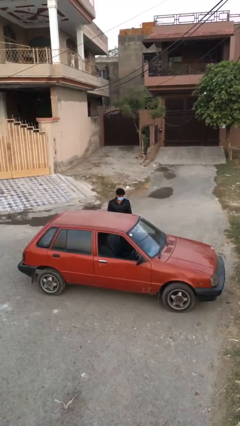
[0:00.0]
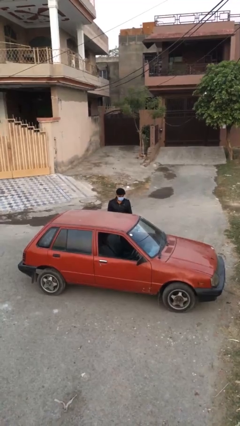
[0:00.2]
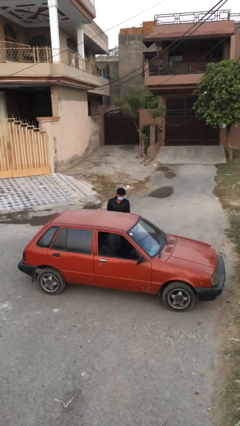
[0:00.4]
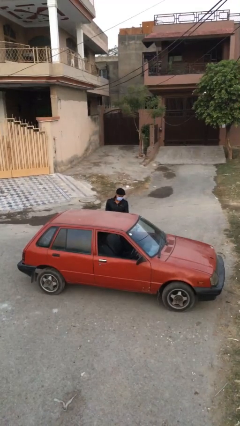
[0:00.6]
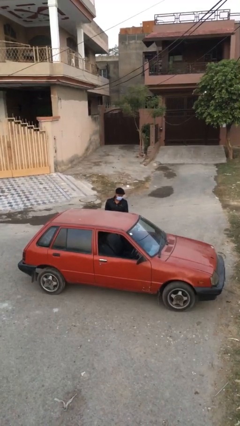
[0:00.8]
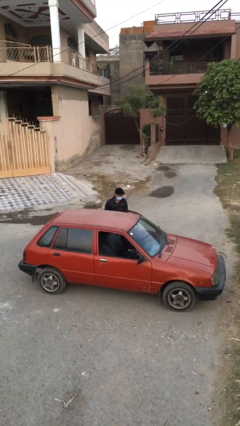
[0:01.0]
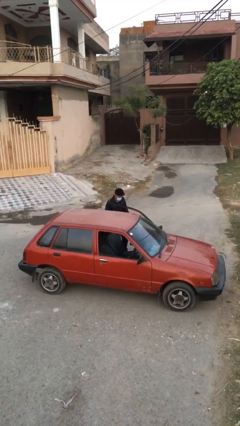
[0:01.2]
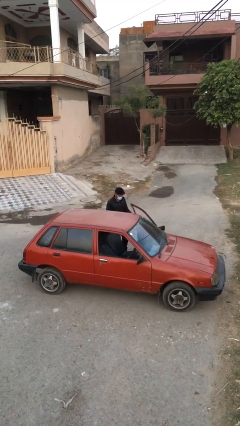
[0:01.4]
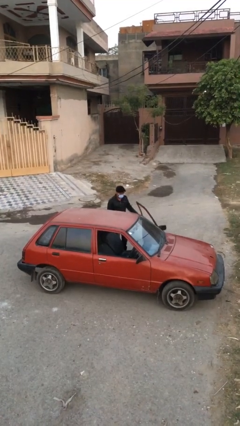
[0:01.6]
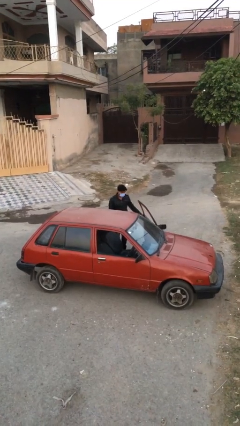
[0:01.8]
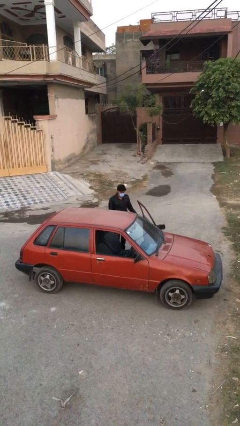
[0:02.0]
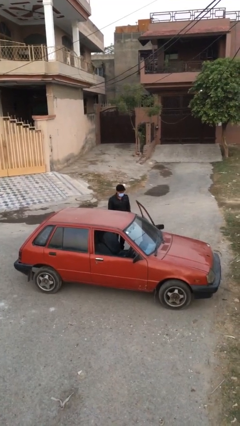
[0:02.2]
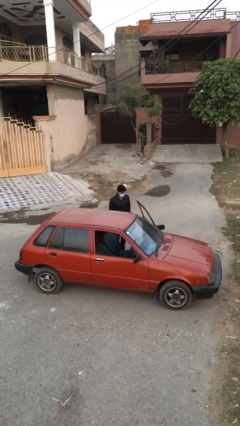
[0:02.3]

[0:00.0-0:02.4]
person opens car door

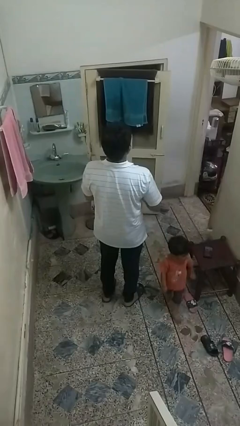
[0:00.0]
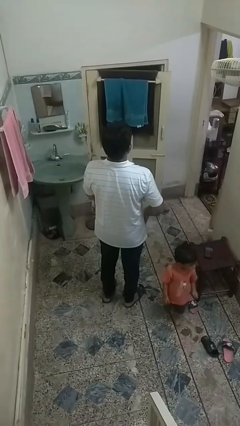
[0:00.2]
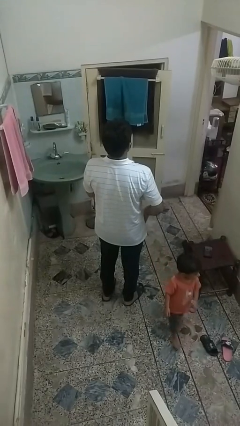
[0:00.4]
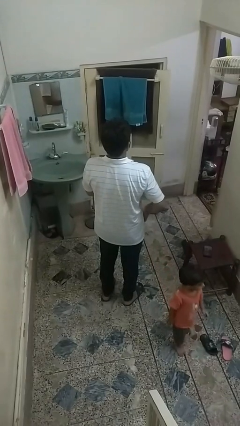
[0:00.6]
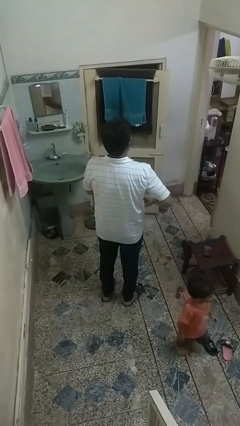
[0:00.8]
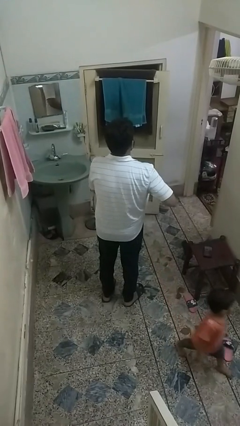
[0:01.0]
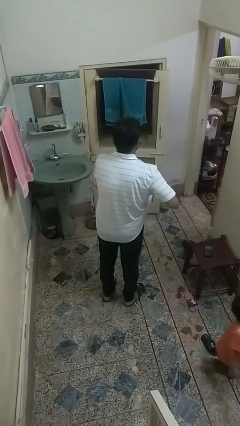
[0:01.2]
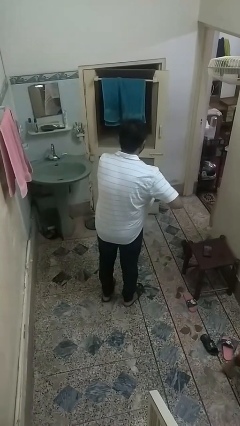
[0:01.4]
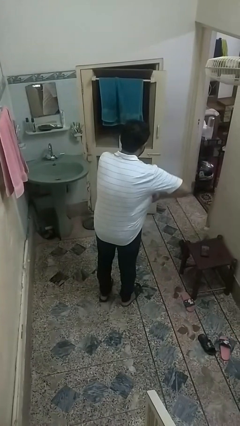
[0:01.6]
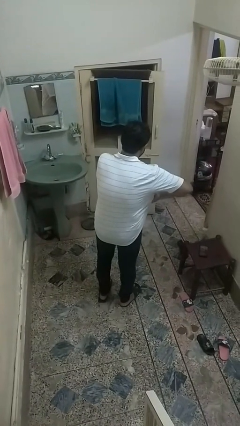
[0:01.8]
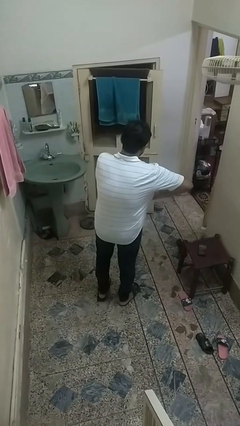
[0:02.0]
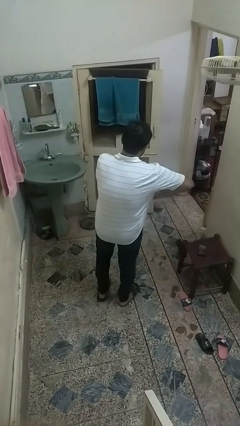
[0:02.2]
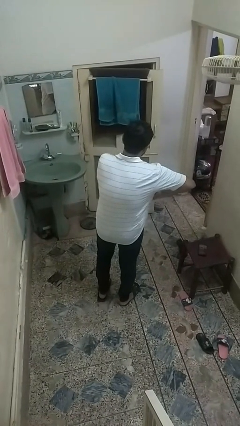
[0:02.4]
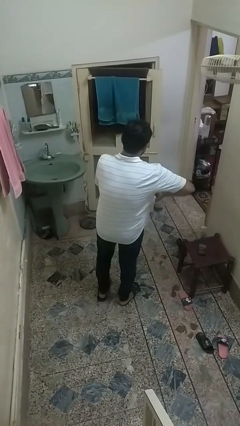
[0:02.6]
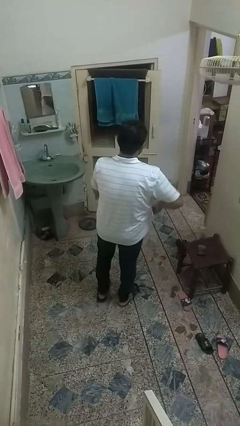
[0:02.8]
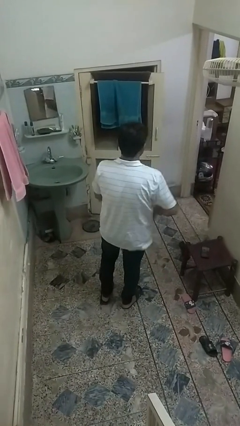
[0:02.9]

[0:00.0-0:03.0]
person applies deodorant

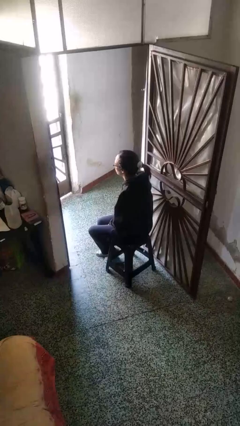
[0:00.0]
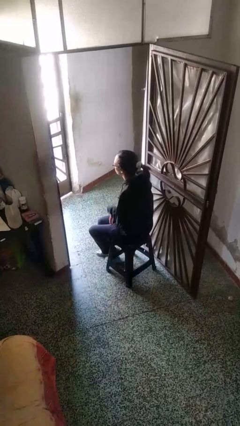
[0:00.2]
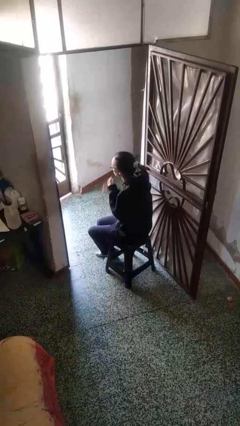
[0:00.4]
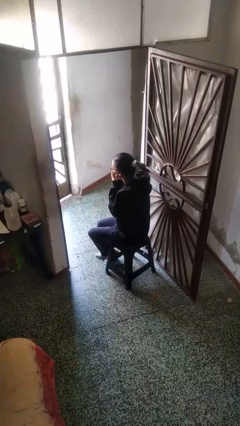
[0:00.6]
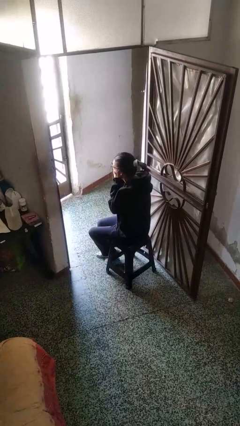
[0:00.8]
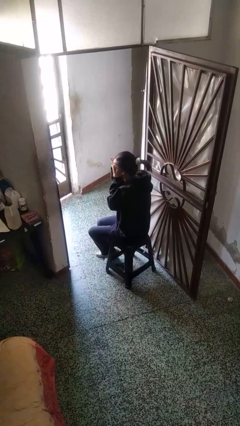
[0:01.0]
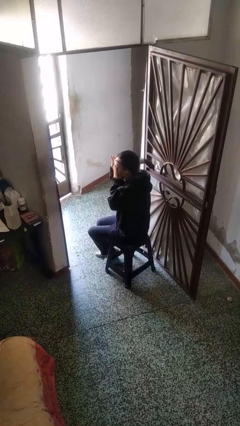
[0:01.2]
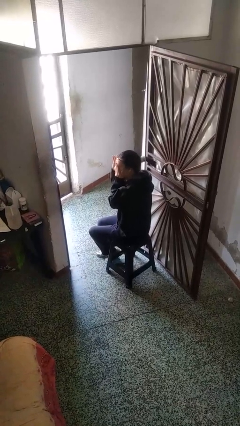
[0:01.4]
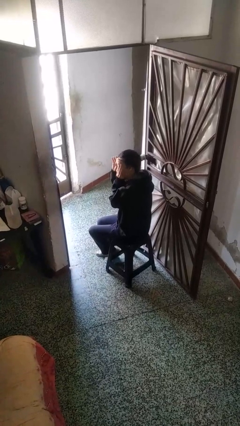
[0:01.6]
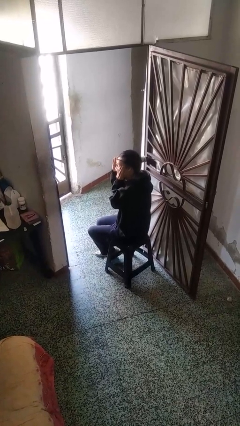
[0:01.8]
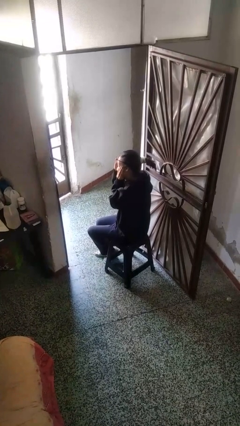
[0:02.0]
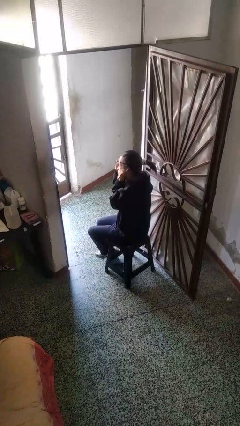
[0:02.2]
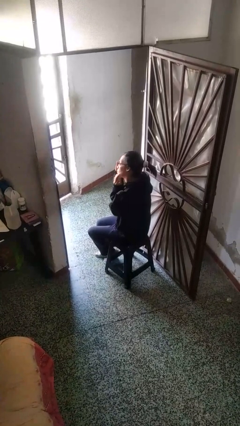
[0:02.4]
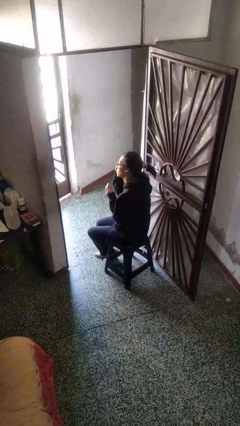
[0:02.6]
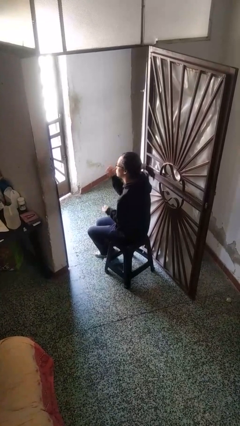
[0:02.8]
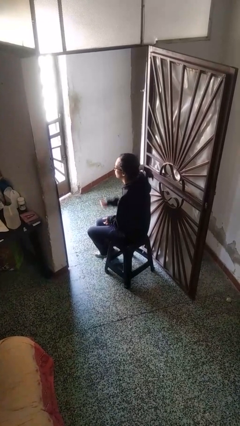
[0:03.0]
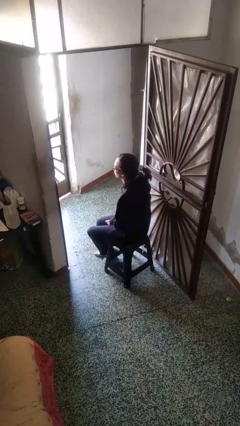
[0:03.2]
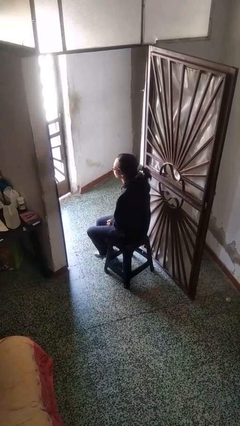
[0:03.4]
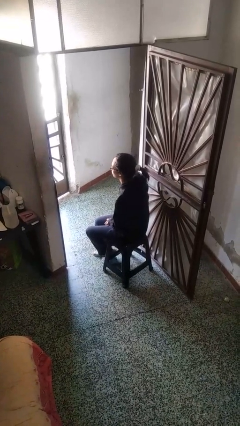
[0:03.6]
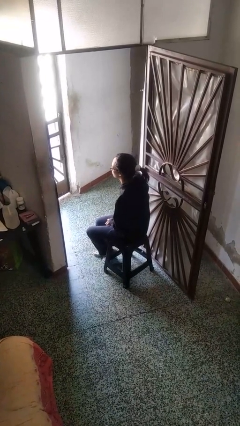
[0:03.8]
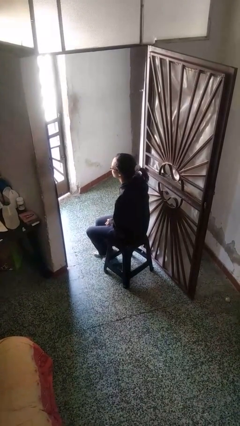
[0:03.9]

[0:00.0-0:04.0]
person rubs eyes

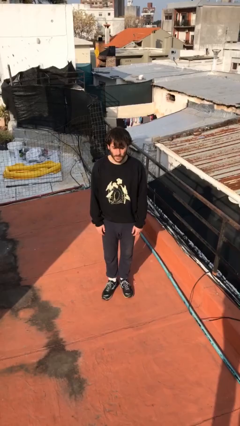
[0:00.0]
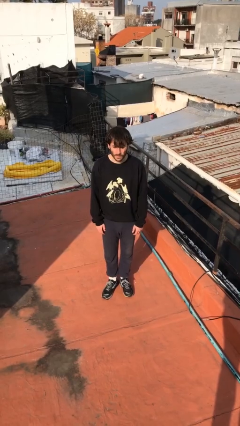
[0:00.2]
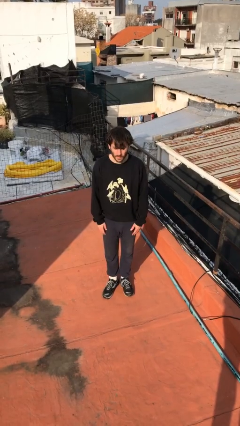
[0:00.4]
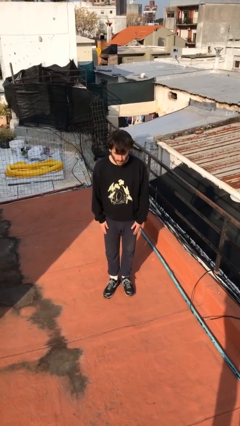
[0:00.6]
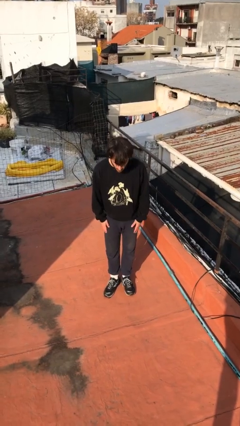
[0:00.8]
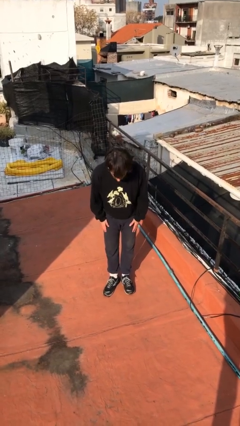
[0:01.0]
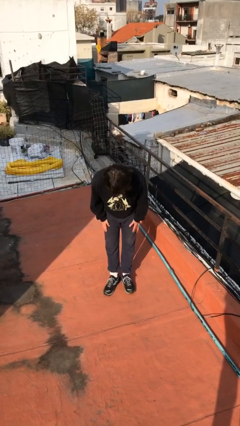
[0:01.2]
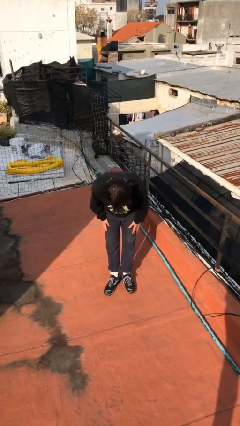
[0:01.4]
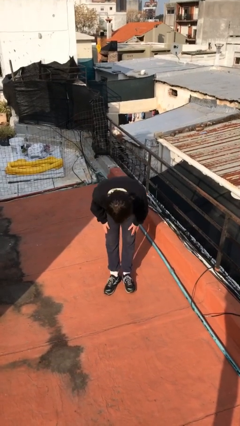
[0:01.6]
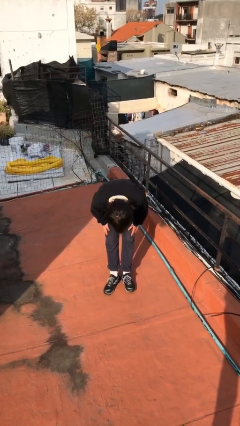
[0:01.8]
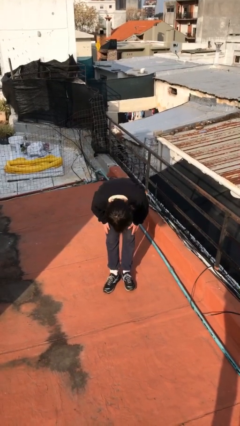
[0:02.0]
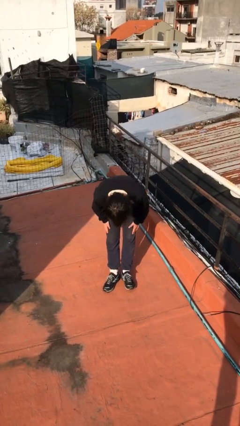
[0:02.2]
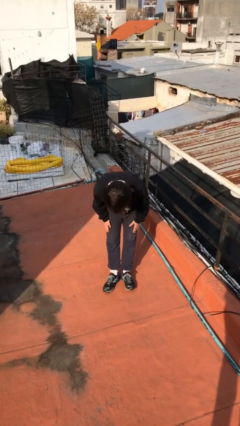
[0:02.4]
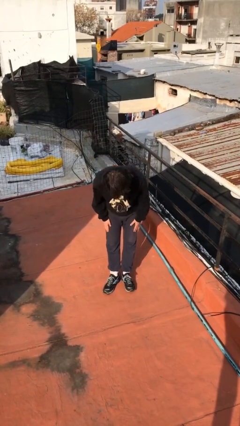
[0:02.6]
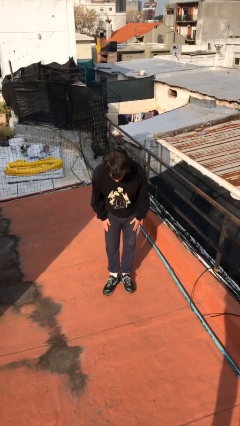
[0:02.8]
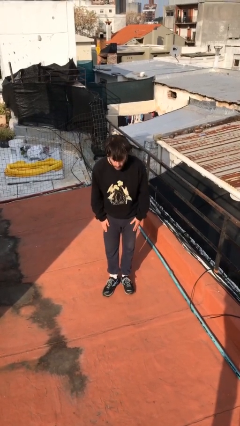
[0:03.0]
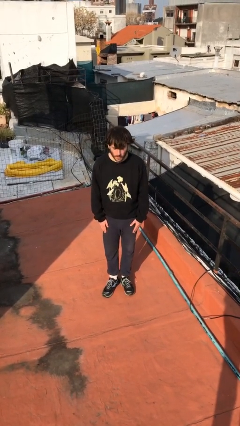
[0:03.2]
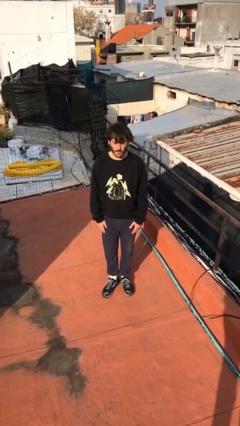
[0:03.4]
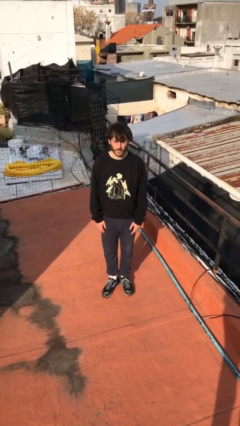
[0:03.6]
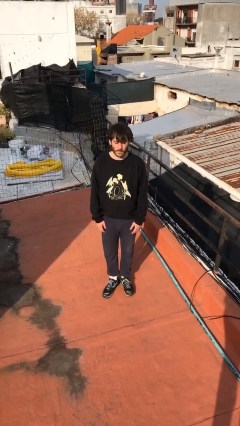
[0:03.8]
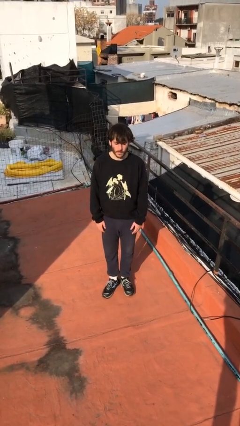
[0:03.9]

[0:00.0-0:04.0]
person bows

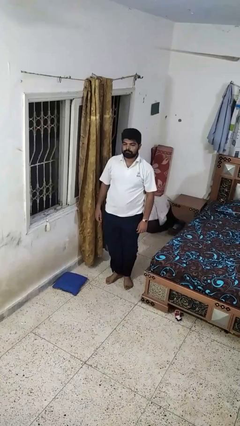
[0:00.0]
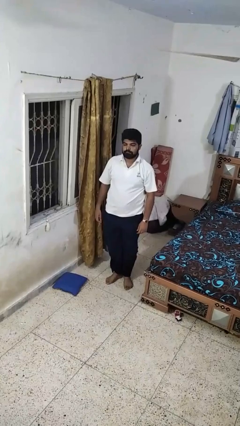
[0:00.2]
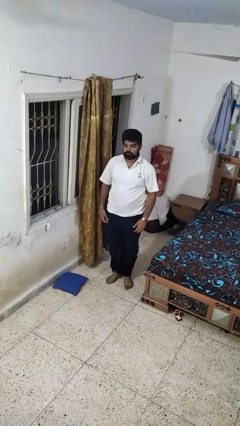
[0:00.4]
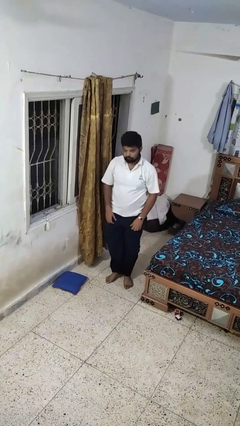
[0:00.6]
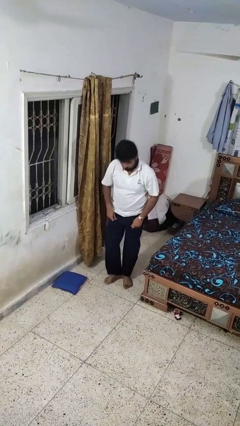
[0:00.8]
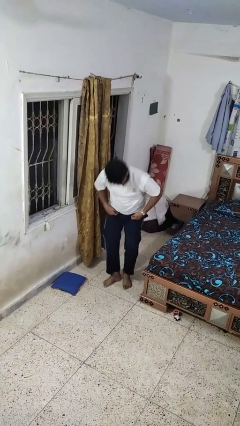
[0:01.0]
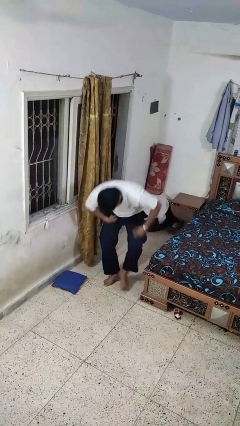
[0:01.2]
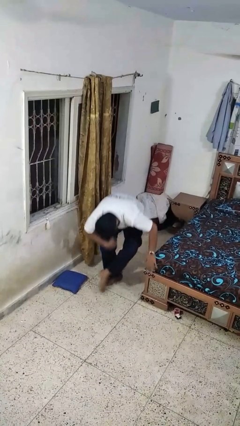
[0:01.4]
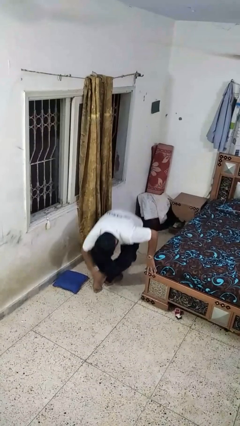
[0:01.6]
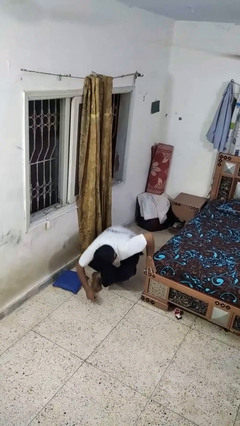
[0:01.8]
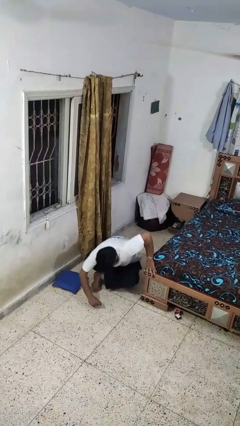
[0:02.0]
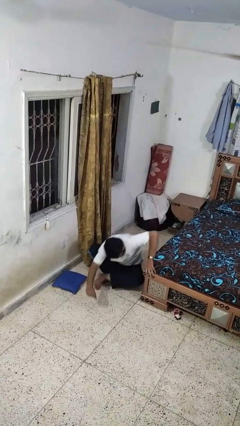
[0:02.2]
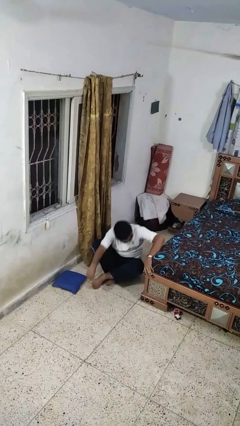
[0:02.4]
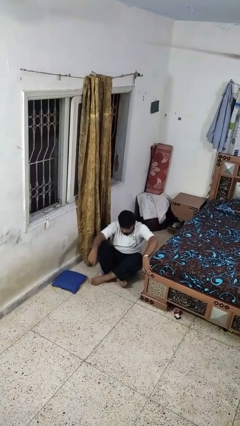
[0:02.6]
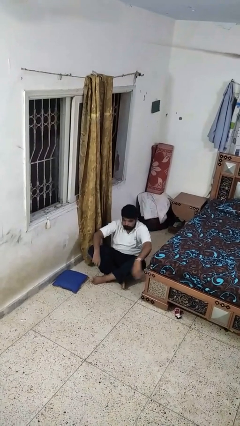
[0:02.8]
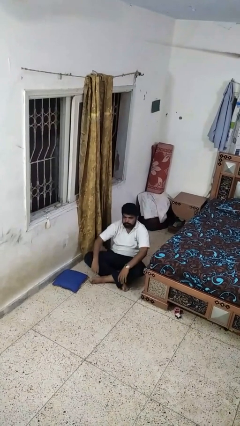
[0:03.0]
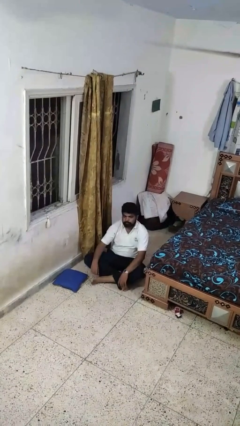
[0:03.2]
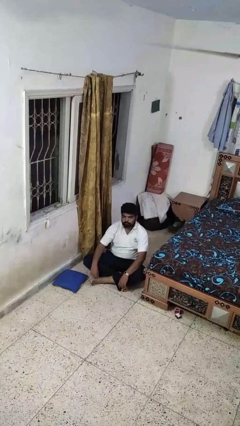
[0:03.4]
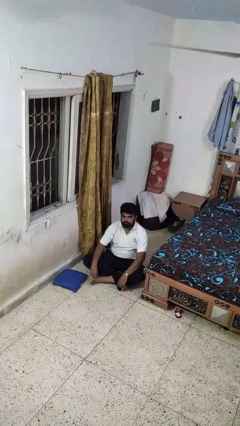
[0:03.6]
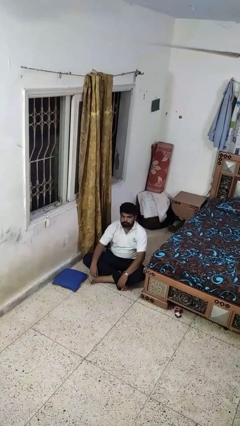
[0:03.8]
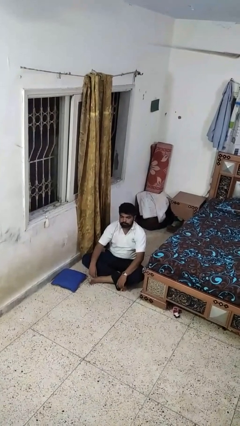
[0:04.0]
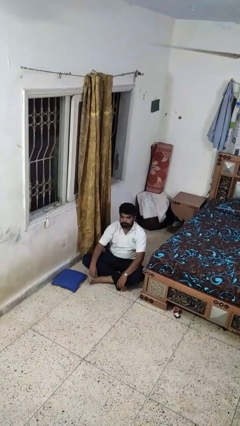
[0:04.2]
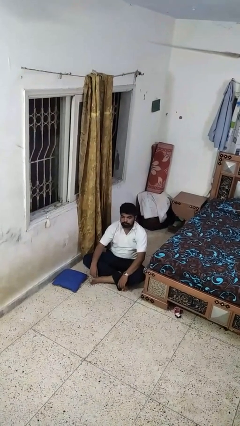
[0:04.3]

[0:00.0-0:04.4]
person sits crisscross
